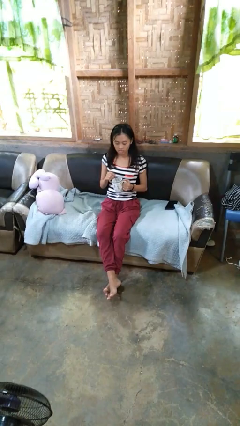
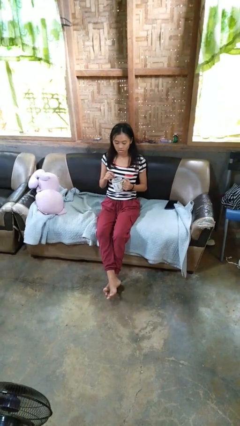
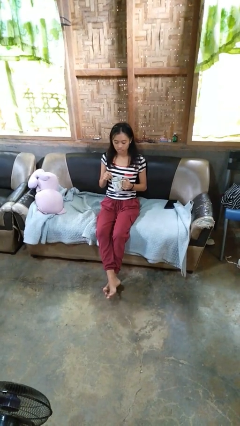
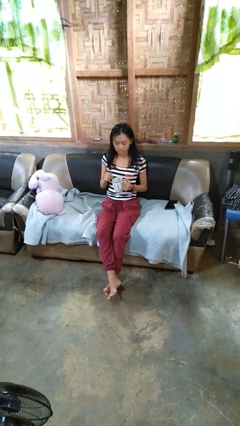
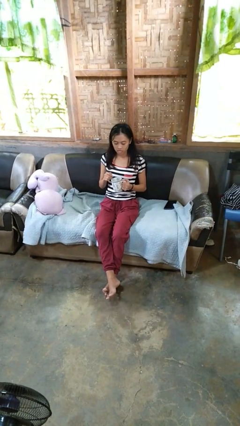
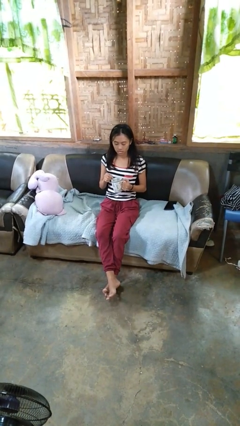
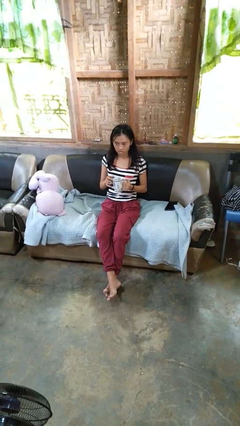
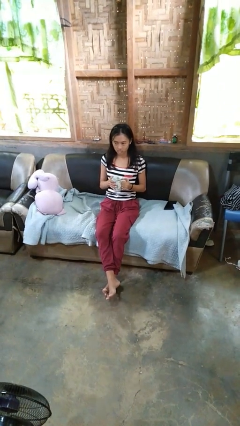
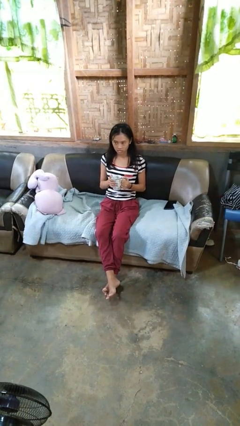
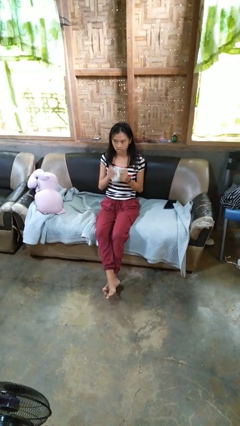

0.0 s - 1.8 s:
person stirs mug

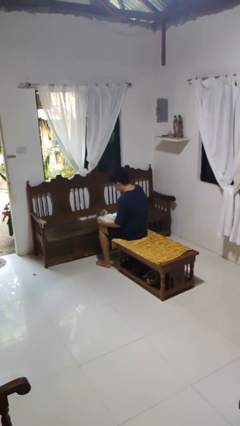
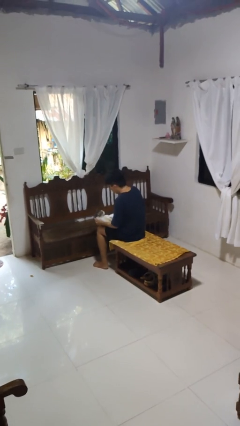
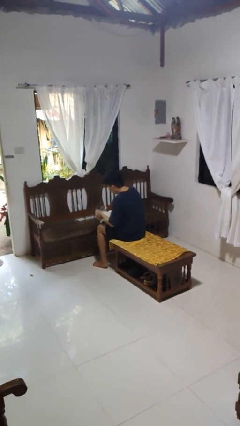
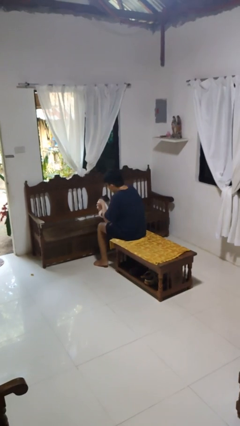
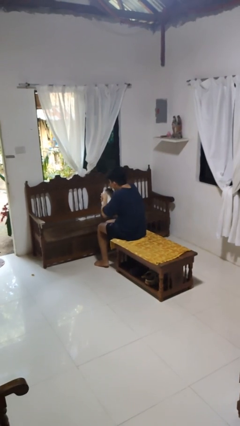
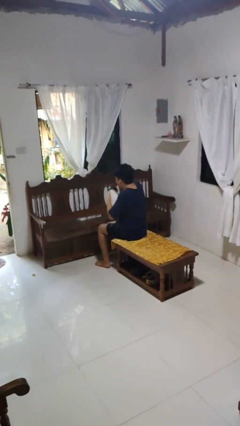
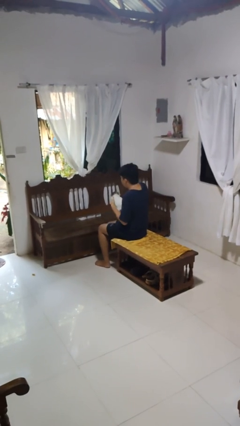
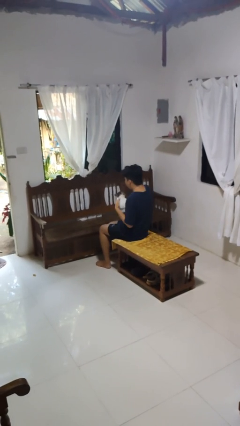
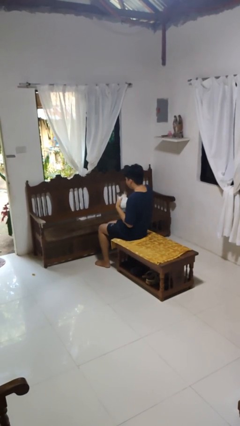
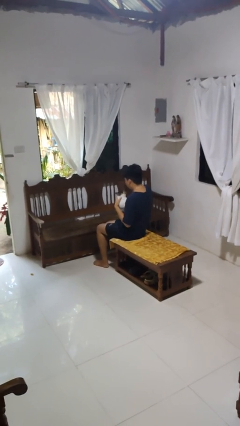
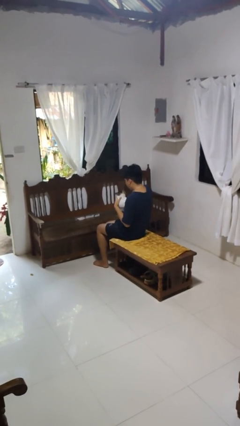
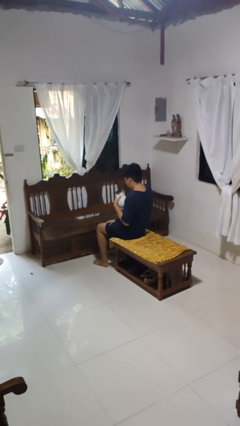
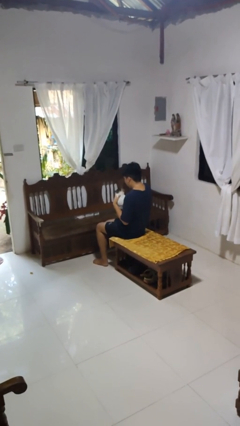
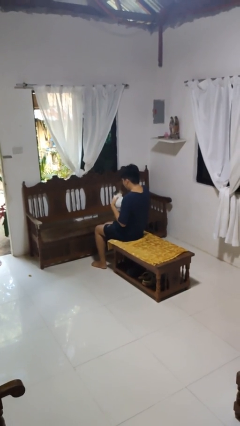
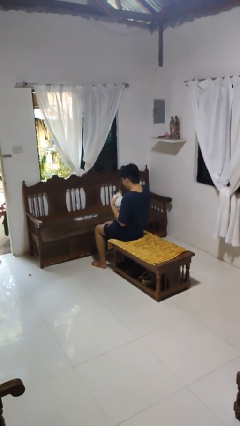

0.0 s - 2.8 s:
person hugs cat

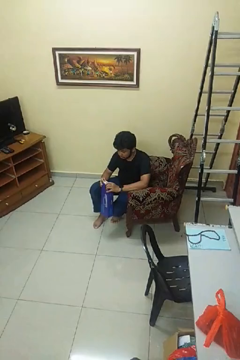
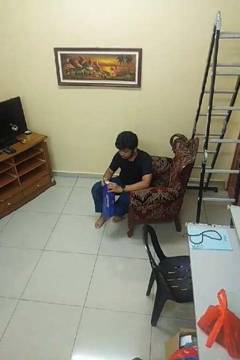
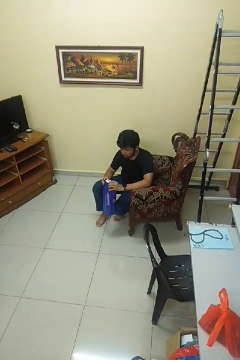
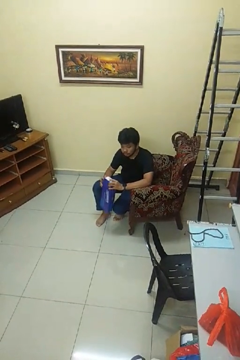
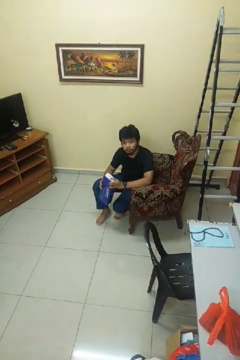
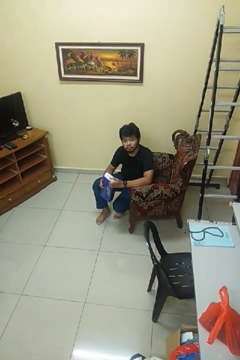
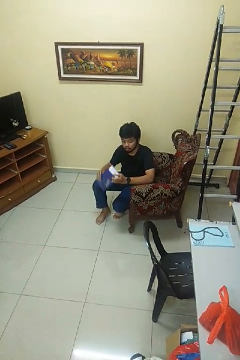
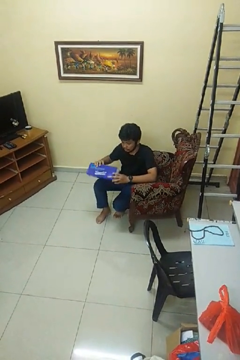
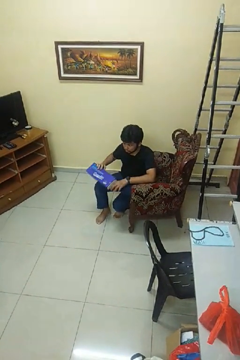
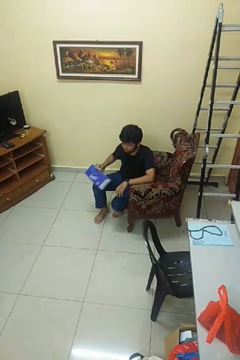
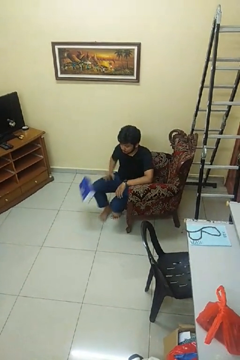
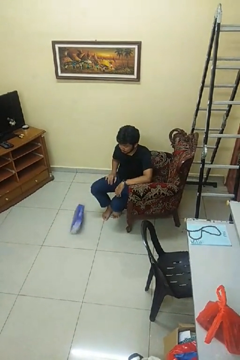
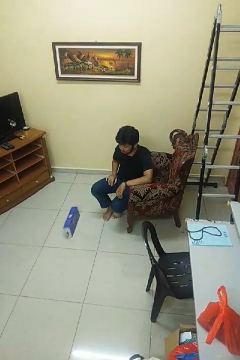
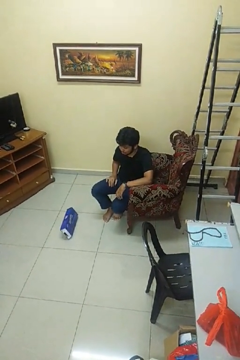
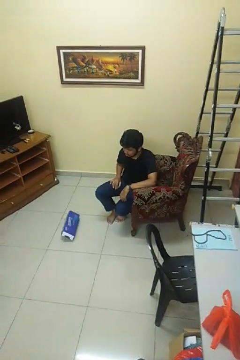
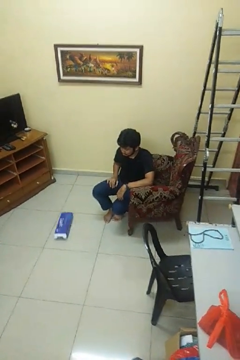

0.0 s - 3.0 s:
person drops object

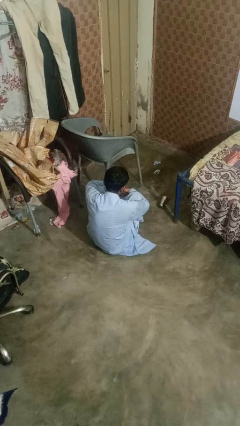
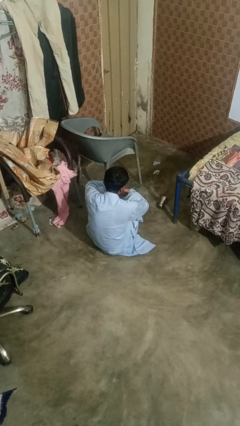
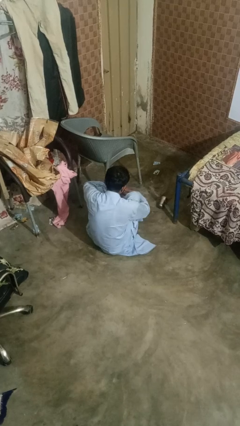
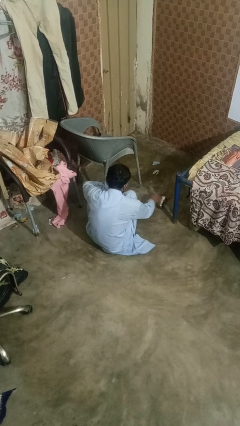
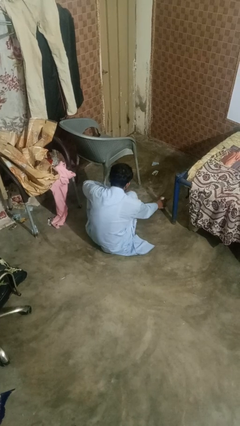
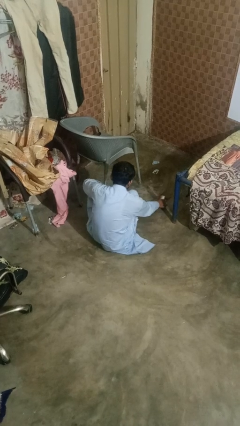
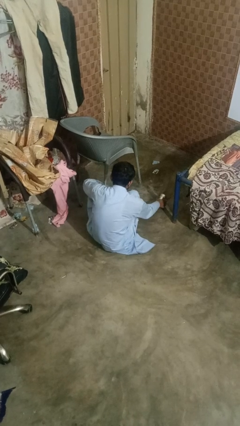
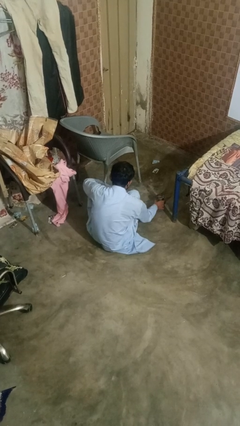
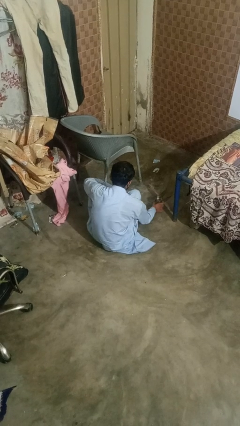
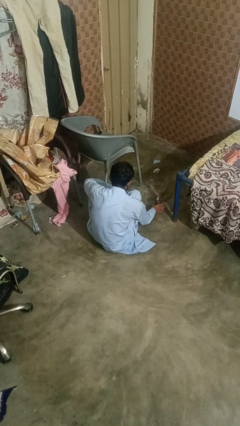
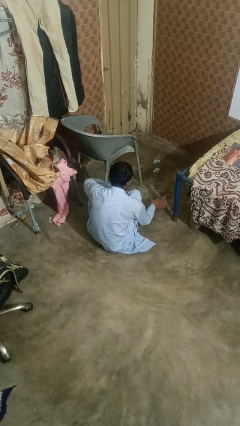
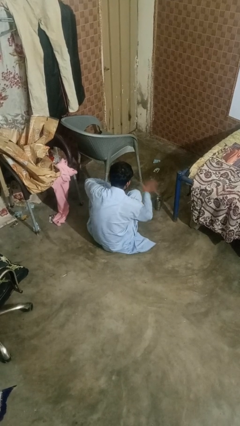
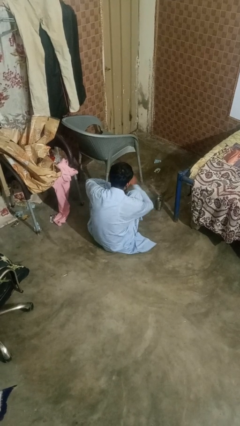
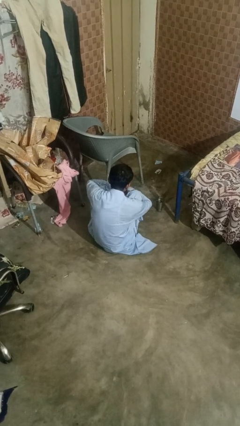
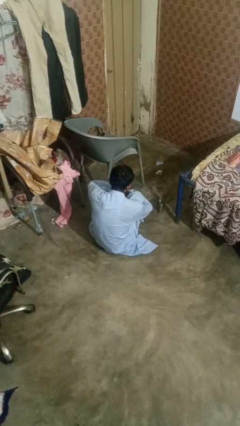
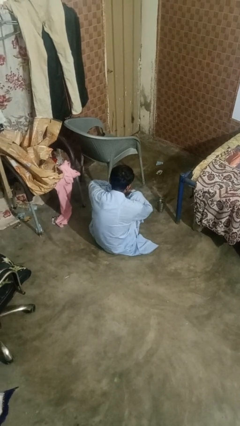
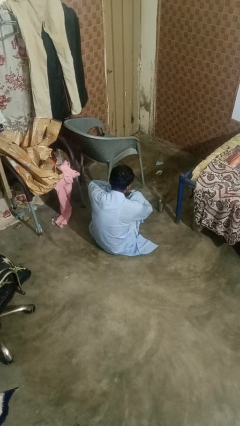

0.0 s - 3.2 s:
person sets upright glass

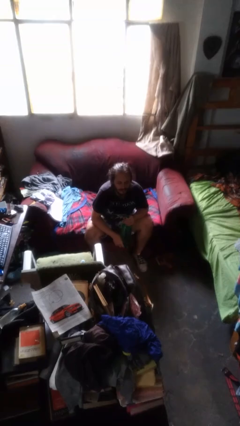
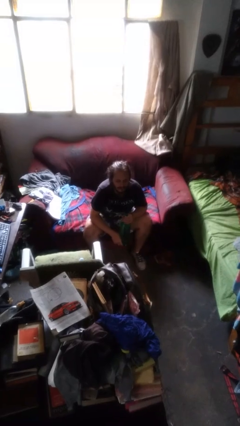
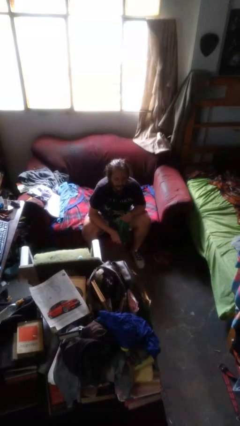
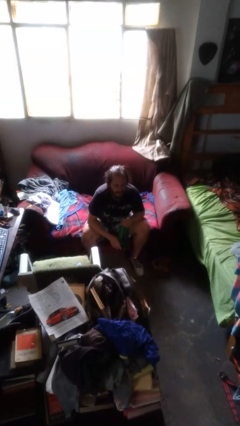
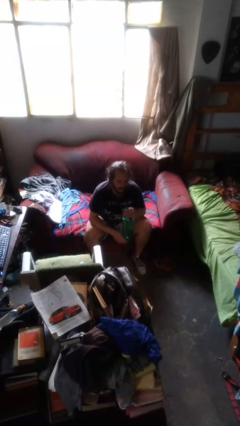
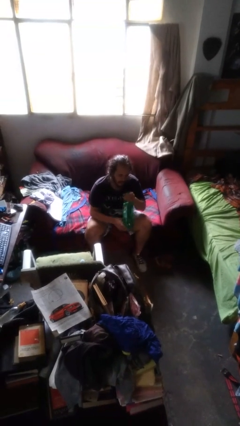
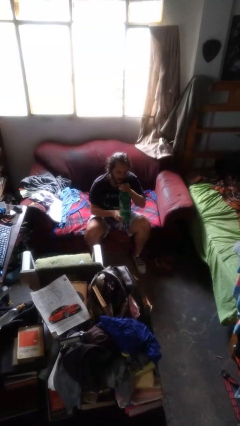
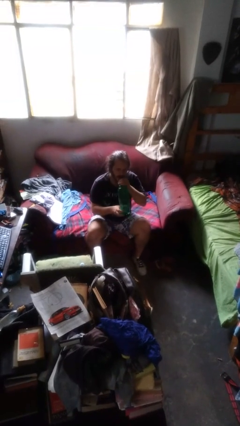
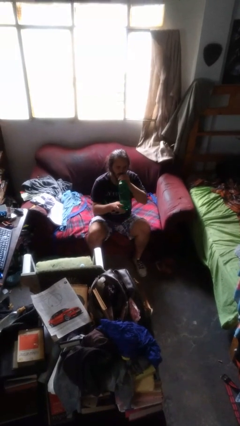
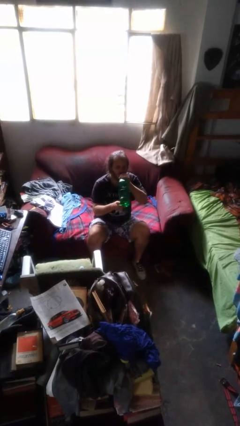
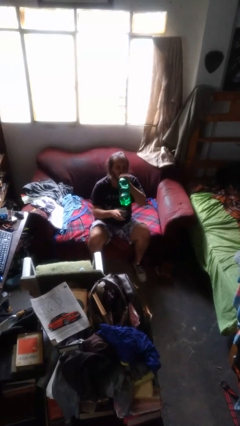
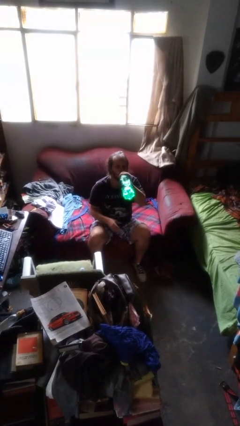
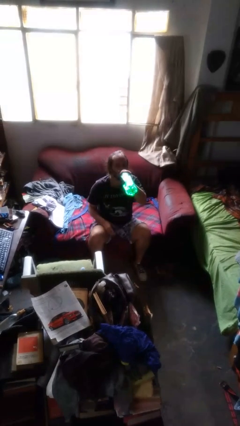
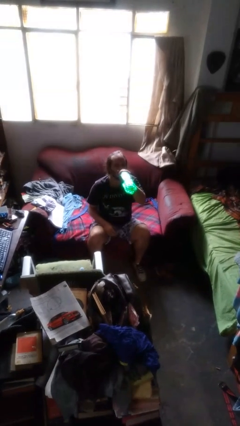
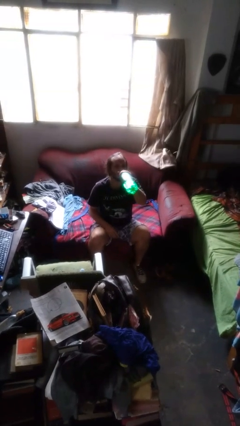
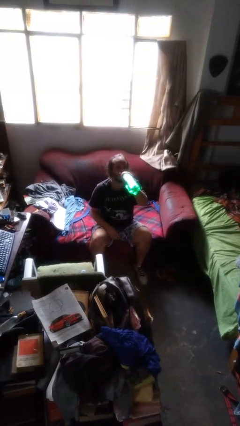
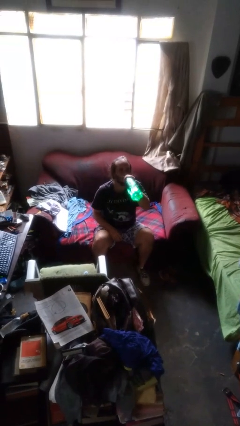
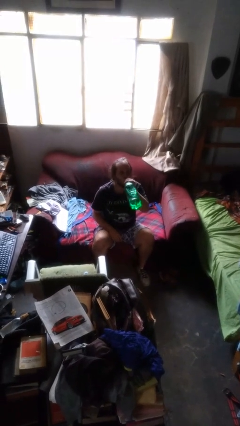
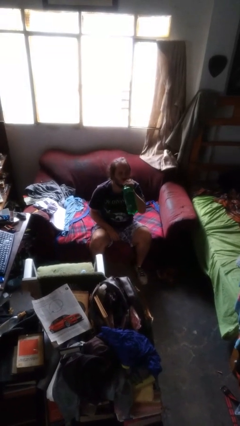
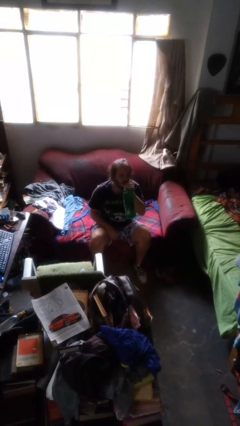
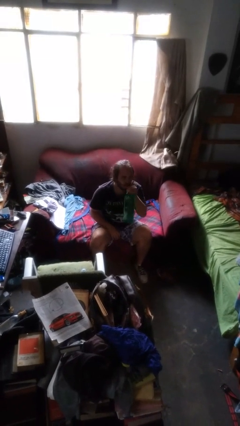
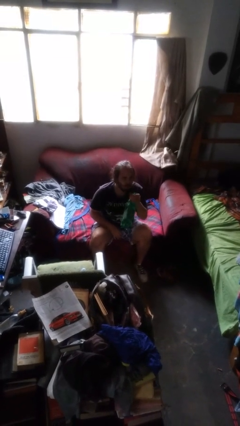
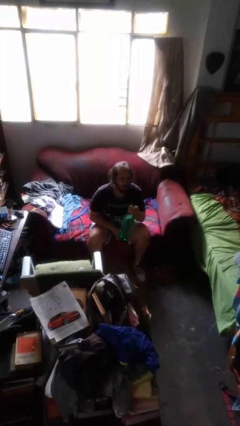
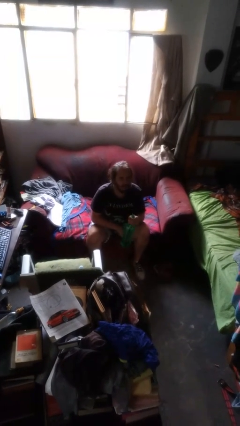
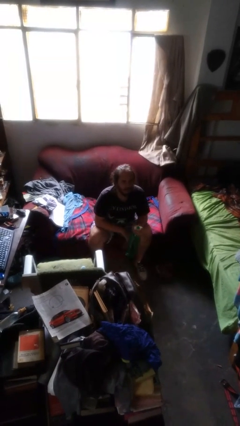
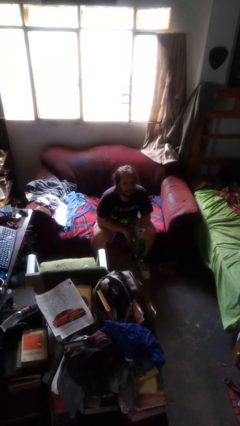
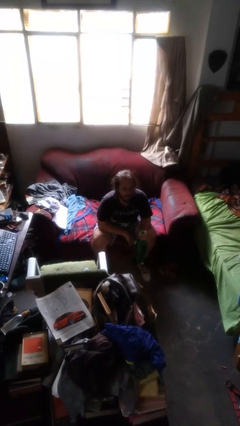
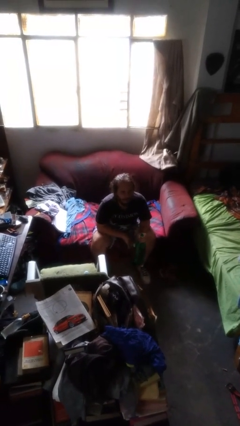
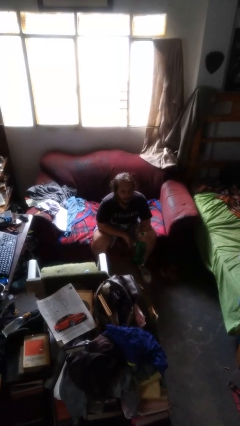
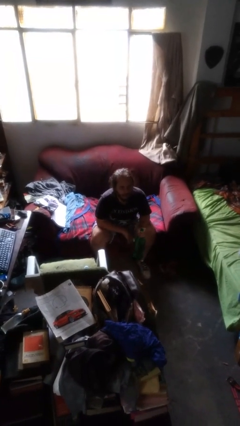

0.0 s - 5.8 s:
person drinks from bottle

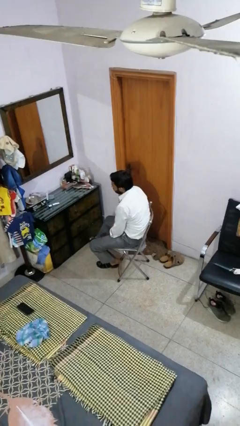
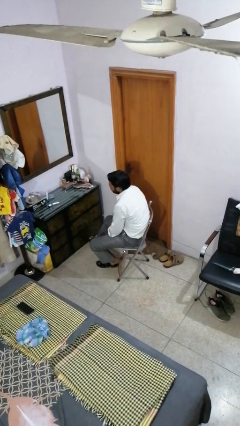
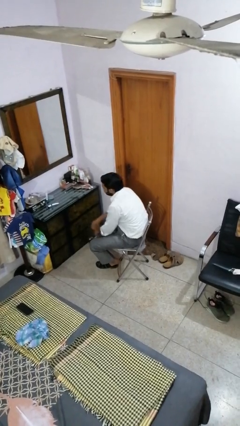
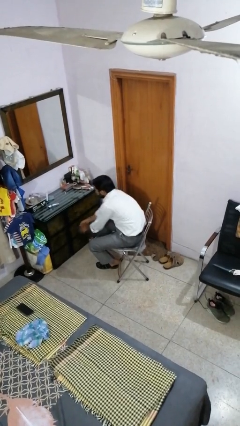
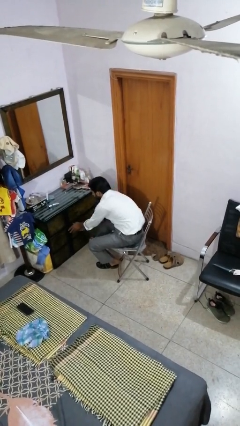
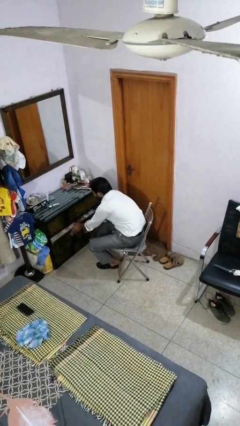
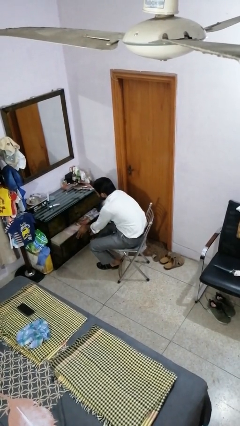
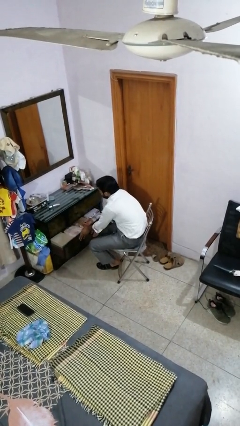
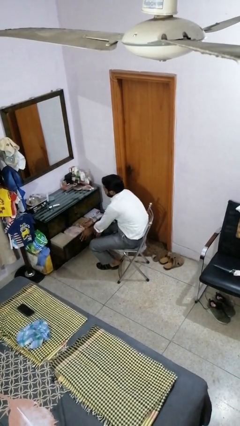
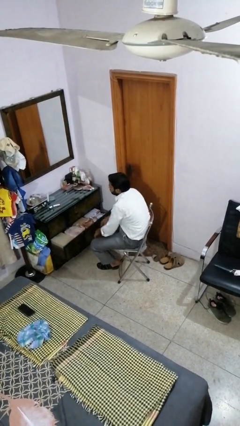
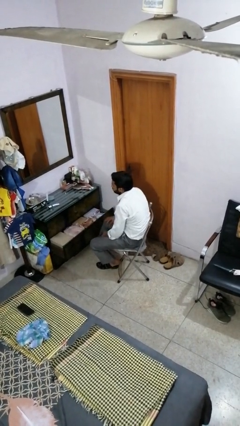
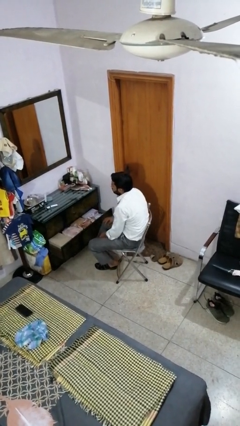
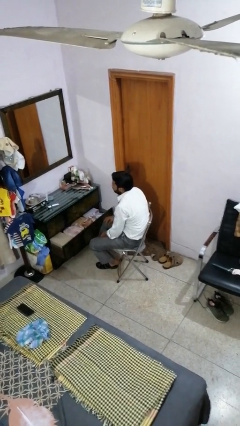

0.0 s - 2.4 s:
person opens dresser drawer
